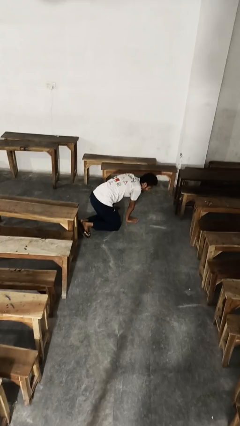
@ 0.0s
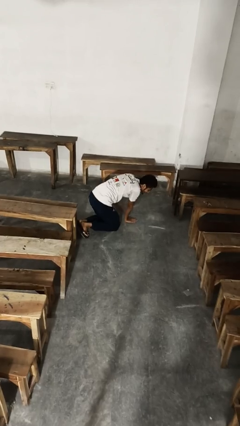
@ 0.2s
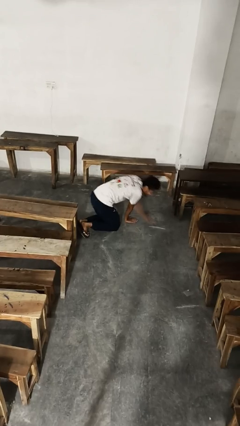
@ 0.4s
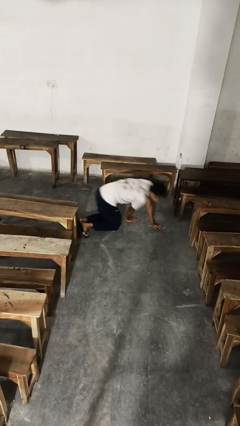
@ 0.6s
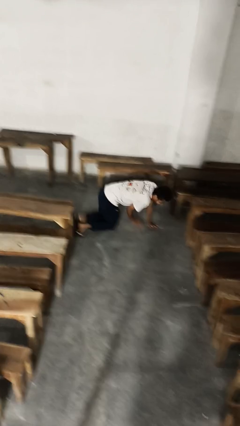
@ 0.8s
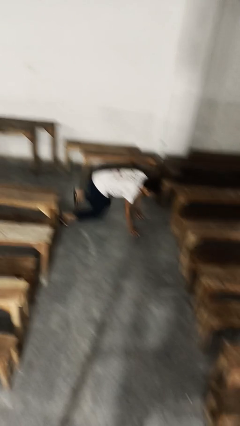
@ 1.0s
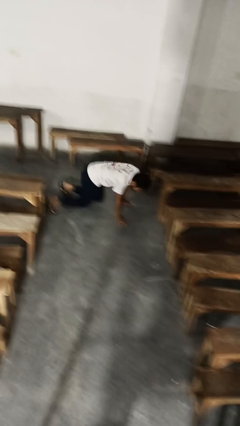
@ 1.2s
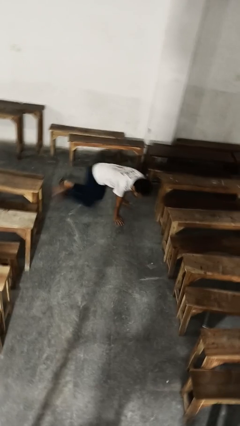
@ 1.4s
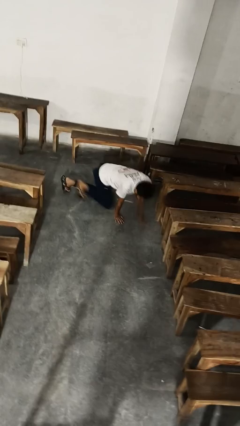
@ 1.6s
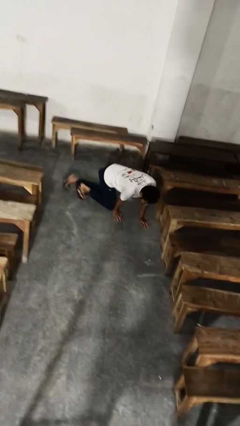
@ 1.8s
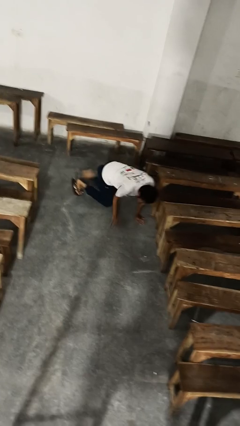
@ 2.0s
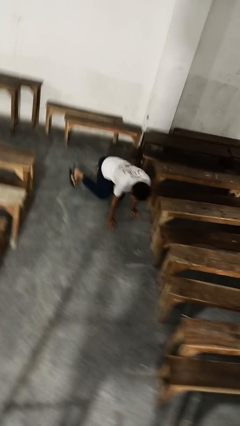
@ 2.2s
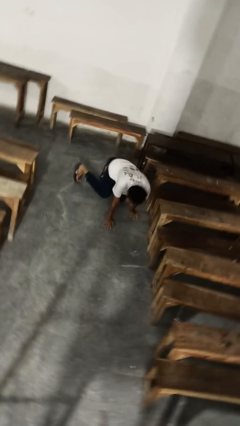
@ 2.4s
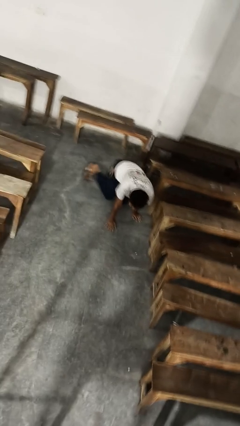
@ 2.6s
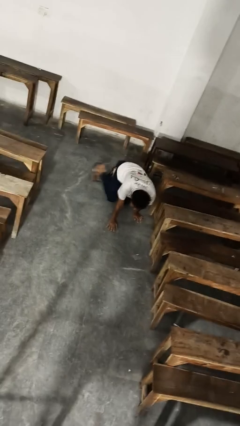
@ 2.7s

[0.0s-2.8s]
person crawls

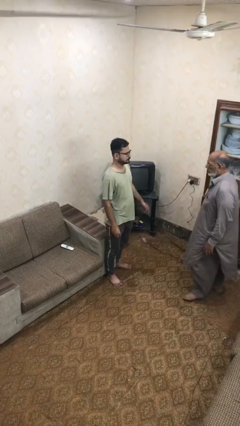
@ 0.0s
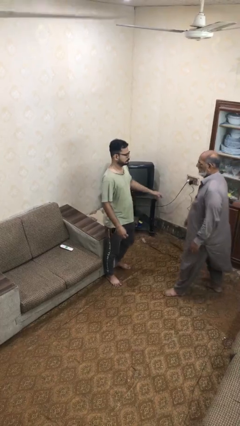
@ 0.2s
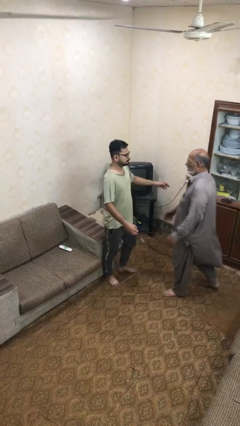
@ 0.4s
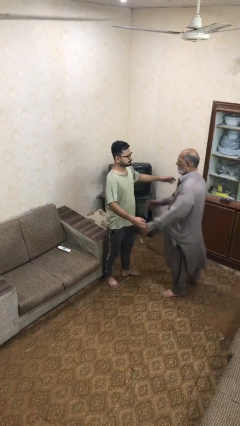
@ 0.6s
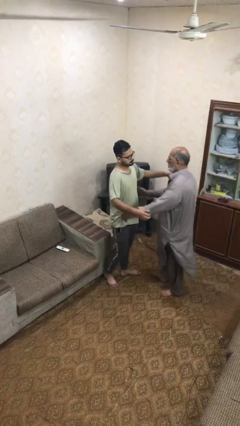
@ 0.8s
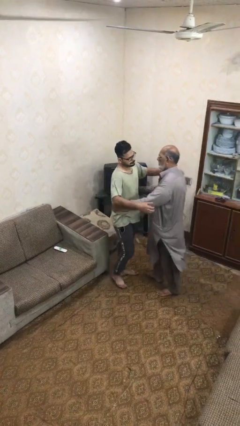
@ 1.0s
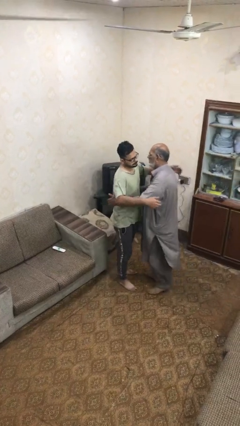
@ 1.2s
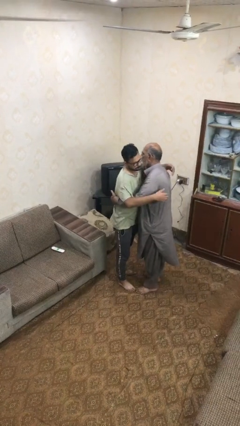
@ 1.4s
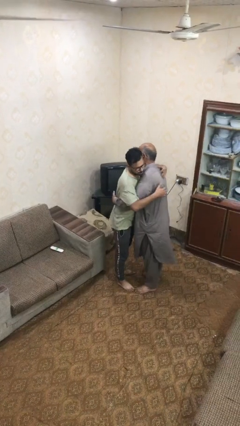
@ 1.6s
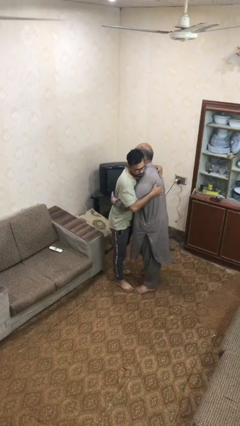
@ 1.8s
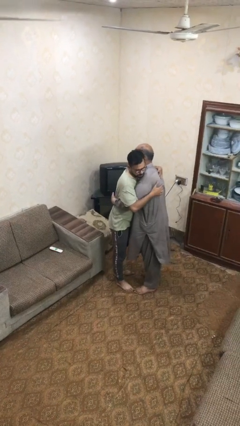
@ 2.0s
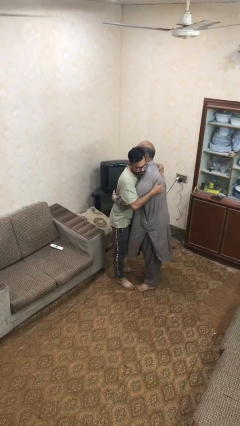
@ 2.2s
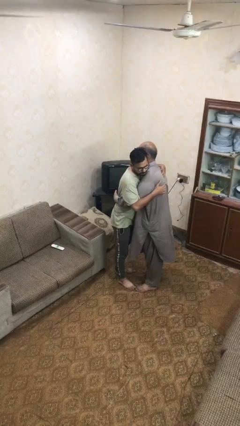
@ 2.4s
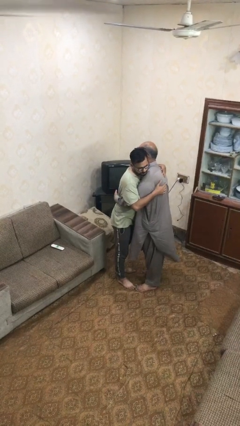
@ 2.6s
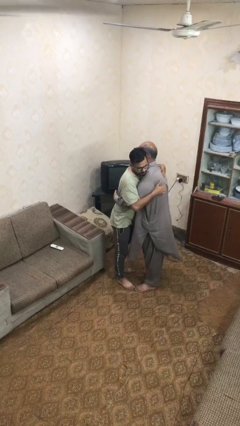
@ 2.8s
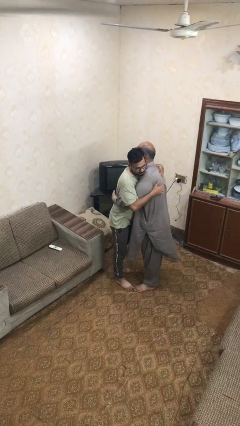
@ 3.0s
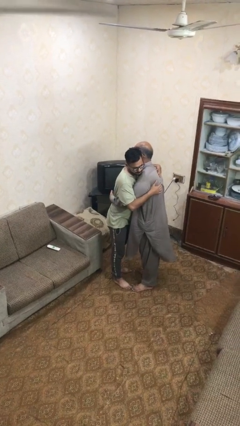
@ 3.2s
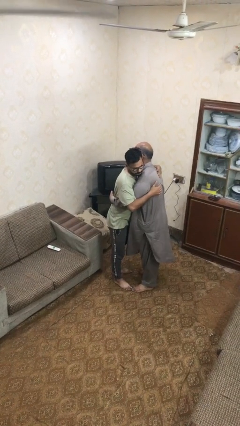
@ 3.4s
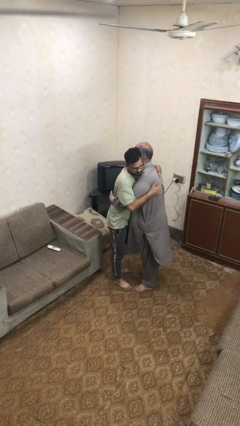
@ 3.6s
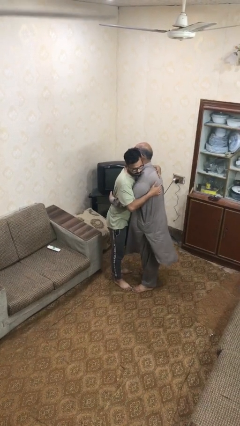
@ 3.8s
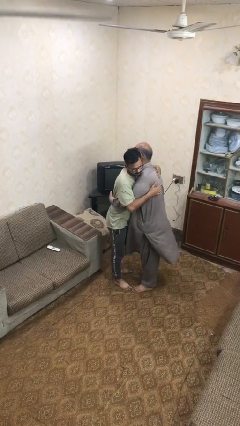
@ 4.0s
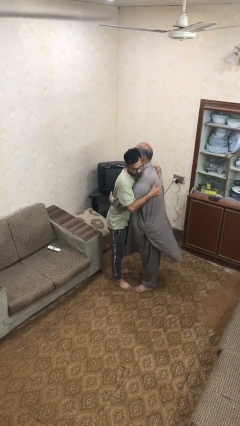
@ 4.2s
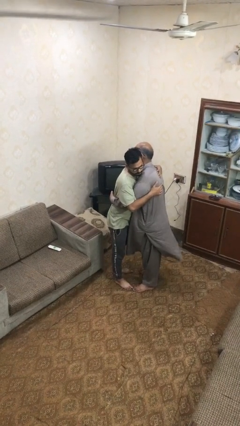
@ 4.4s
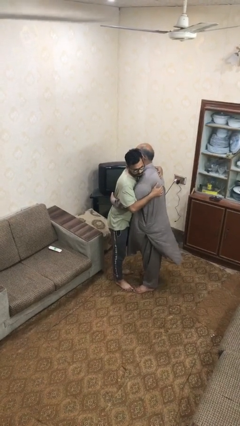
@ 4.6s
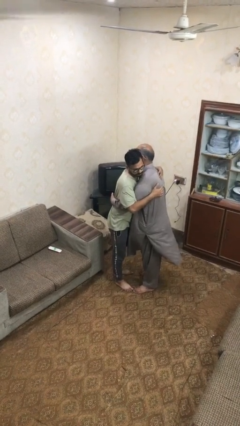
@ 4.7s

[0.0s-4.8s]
person embraces person

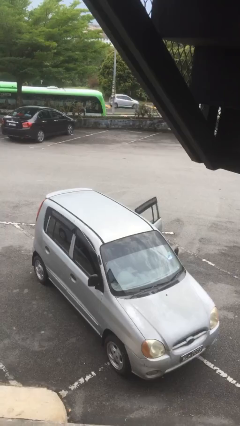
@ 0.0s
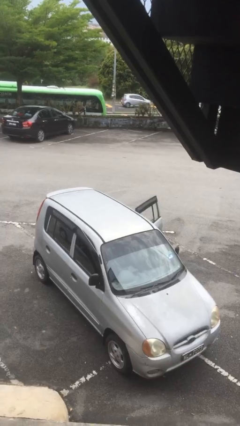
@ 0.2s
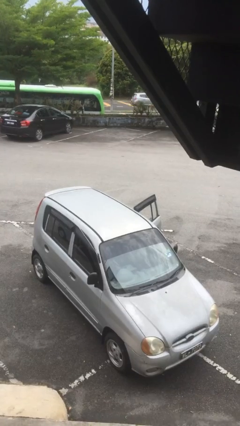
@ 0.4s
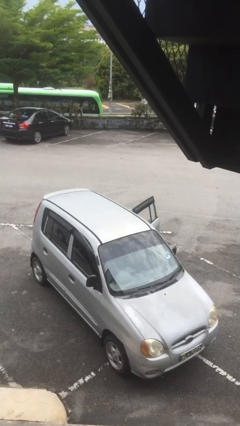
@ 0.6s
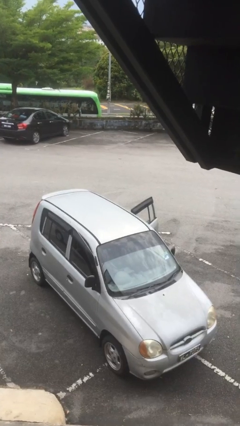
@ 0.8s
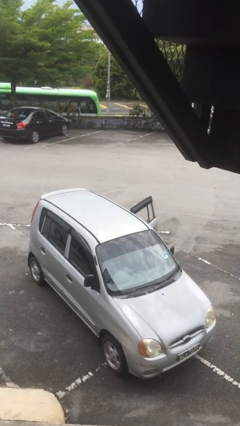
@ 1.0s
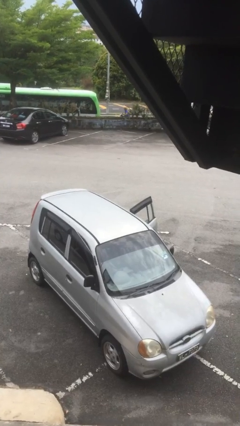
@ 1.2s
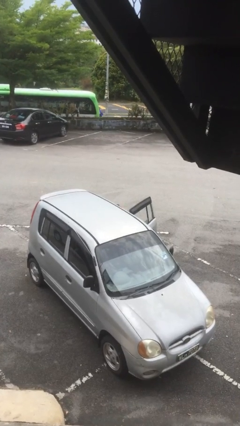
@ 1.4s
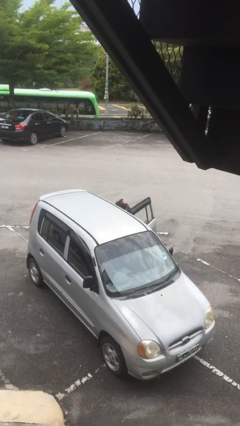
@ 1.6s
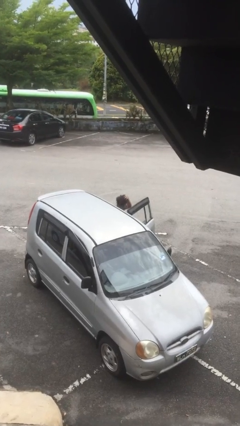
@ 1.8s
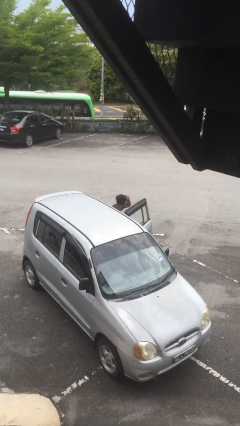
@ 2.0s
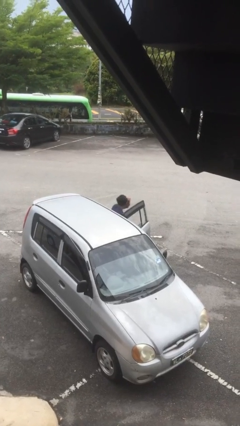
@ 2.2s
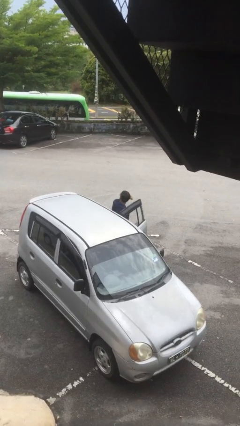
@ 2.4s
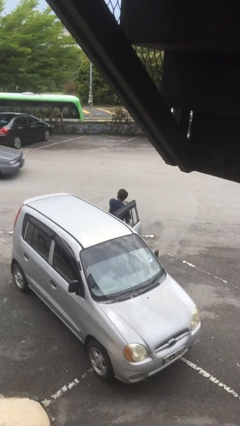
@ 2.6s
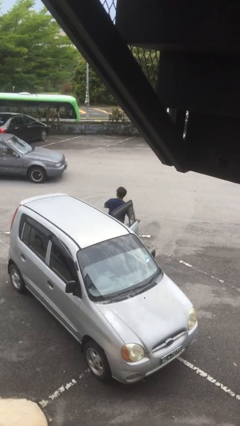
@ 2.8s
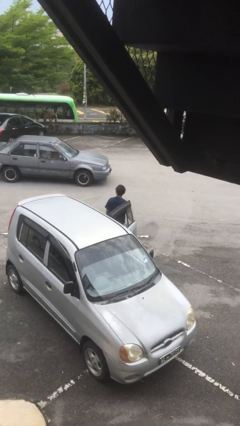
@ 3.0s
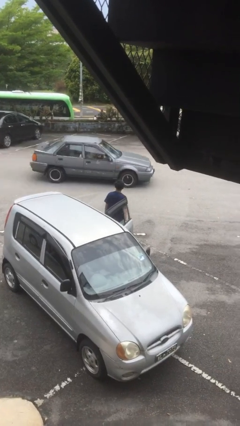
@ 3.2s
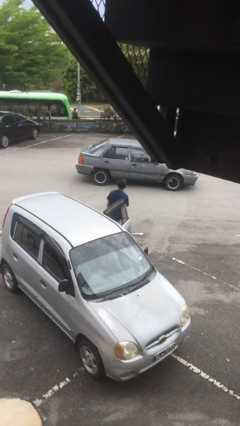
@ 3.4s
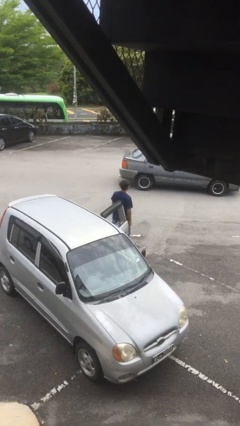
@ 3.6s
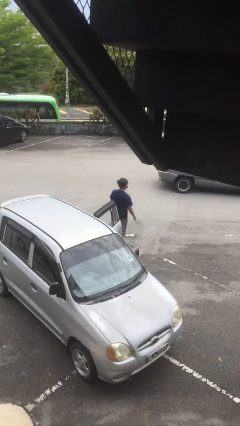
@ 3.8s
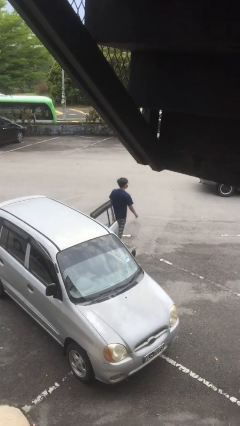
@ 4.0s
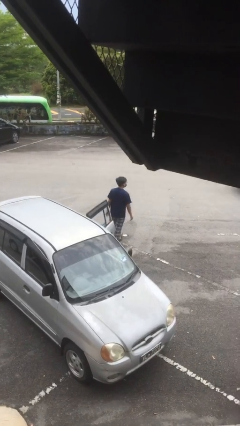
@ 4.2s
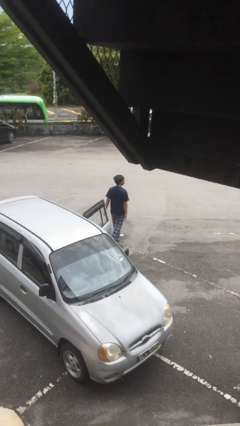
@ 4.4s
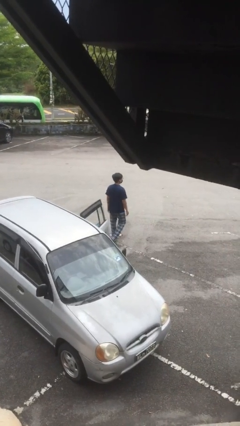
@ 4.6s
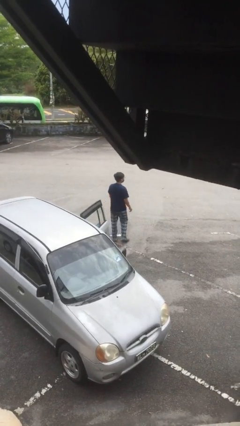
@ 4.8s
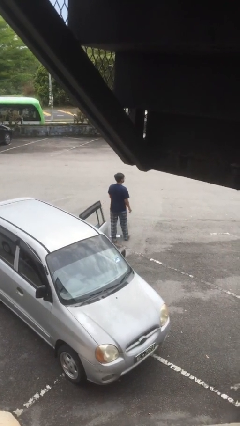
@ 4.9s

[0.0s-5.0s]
person exits car

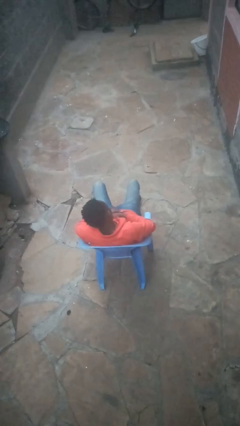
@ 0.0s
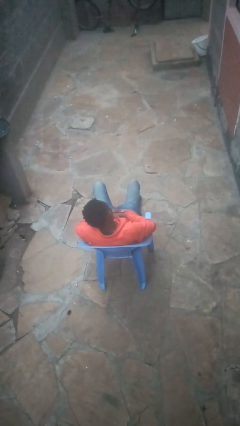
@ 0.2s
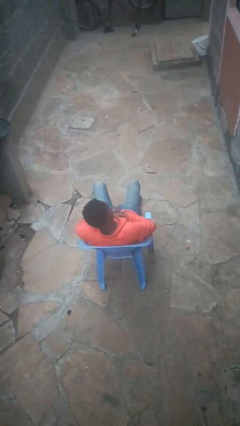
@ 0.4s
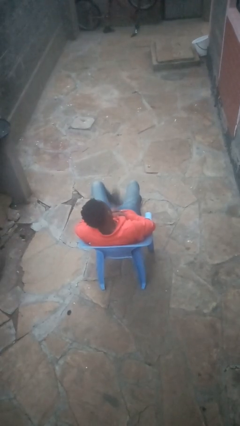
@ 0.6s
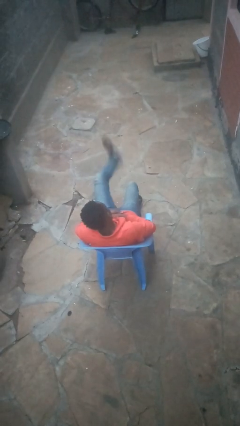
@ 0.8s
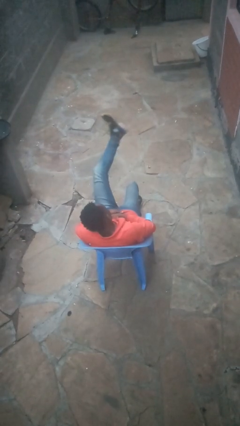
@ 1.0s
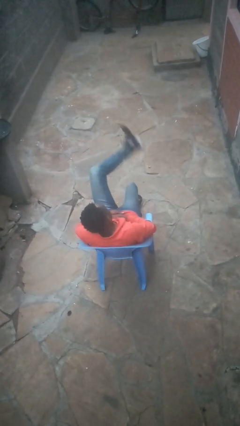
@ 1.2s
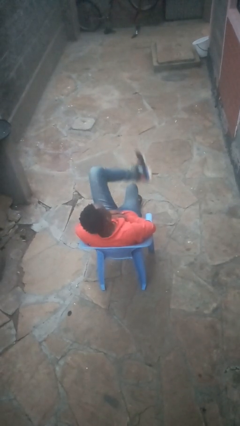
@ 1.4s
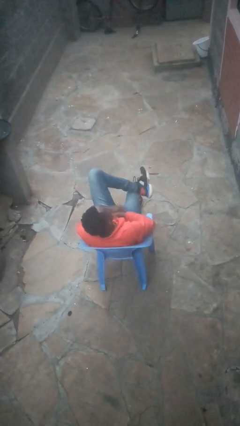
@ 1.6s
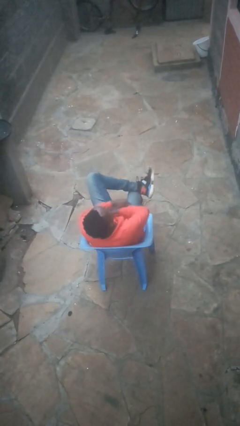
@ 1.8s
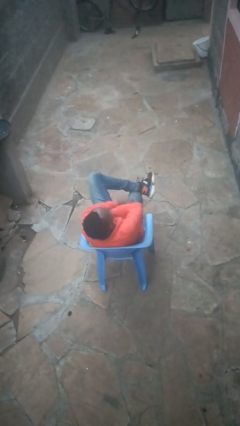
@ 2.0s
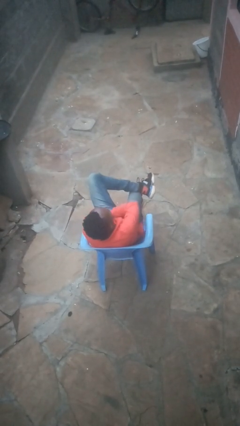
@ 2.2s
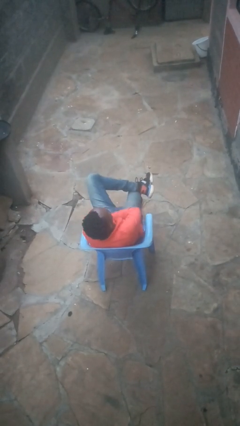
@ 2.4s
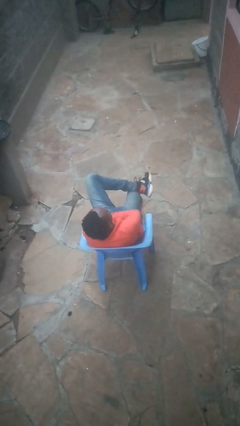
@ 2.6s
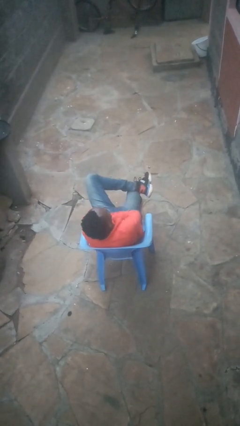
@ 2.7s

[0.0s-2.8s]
person crosses legs

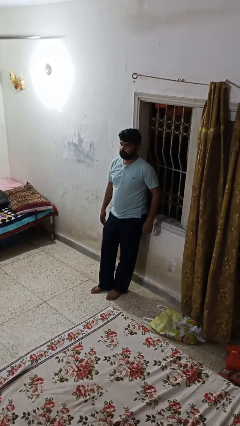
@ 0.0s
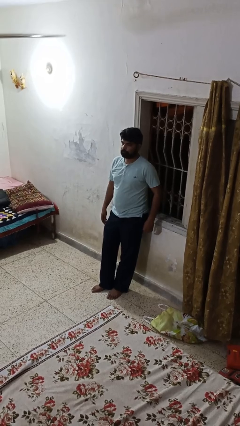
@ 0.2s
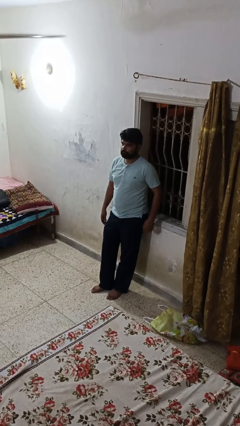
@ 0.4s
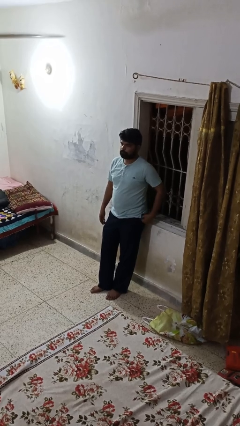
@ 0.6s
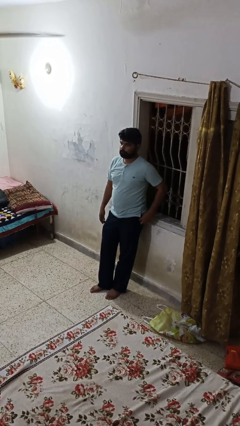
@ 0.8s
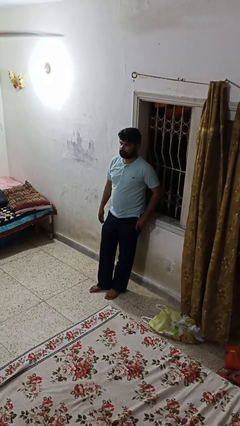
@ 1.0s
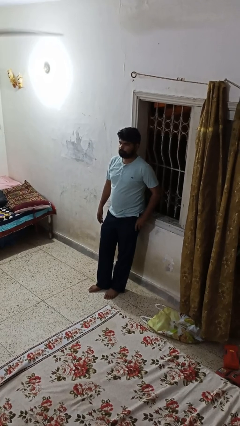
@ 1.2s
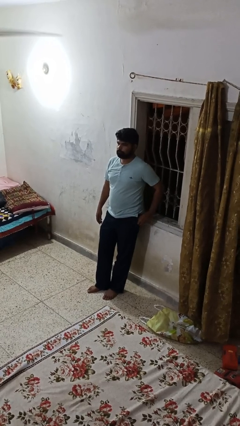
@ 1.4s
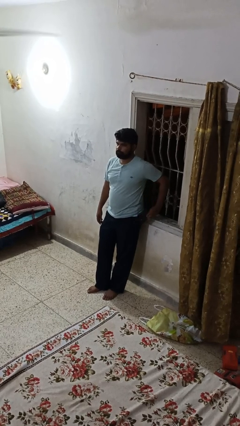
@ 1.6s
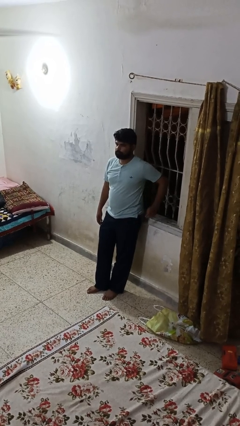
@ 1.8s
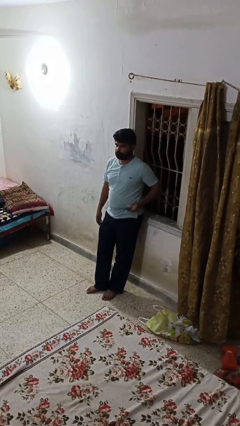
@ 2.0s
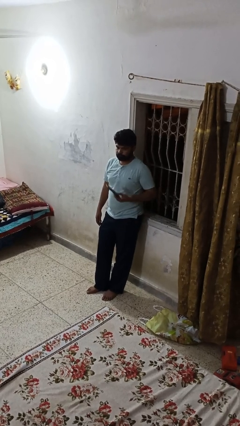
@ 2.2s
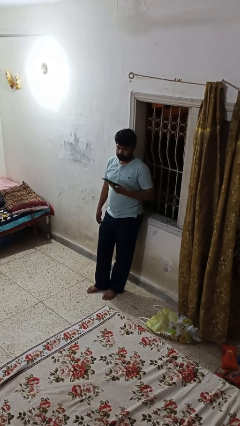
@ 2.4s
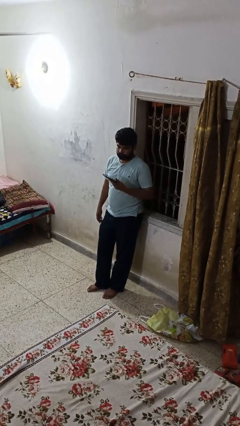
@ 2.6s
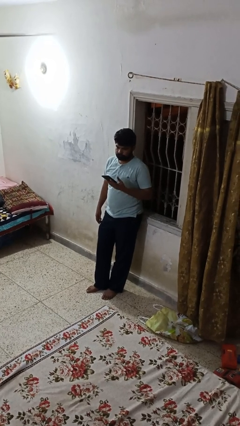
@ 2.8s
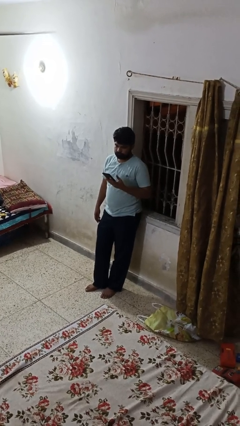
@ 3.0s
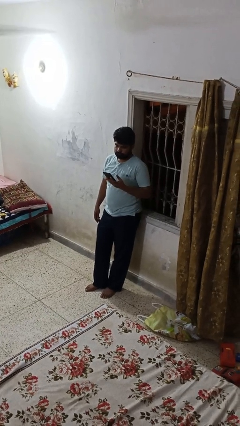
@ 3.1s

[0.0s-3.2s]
person takes phone from pocket
